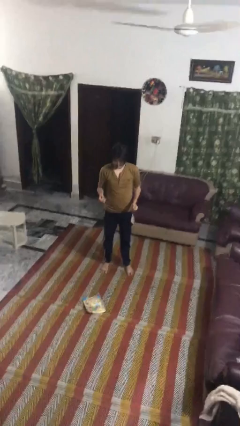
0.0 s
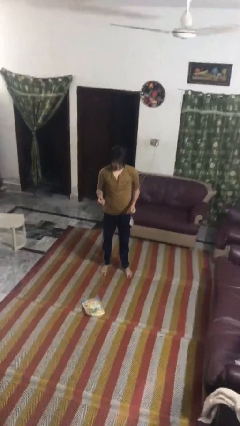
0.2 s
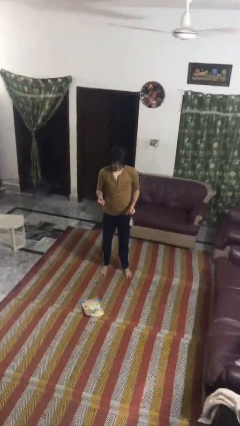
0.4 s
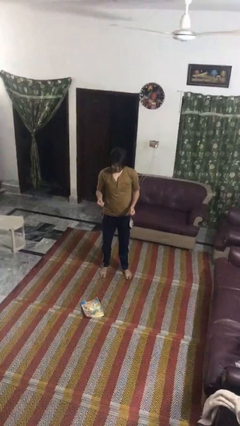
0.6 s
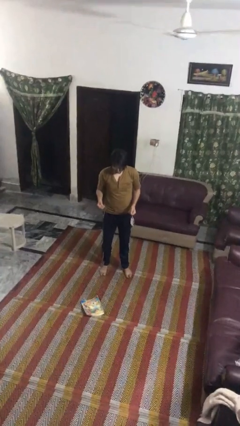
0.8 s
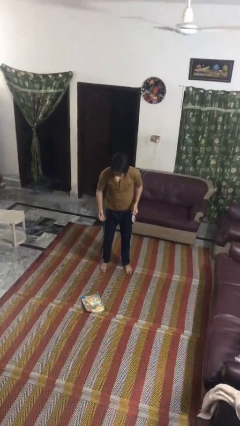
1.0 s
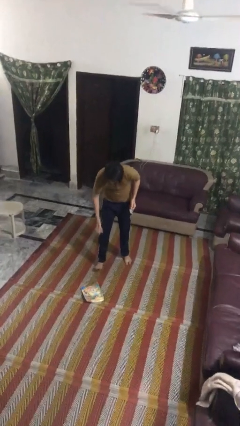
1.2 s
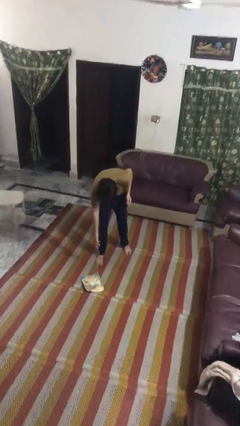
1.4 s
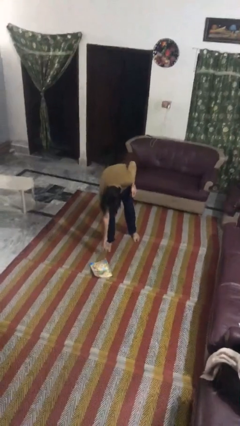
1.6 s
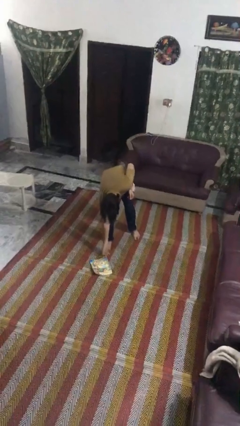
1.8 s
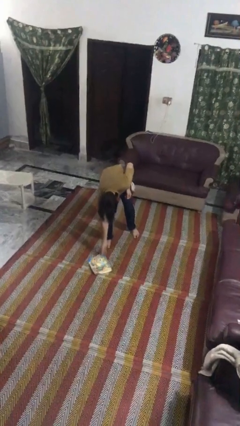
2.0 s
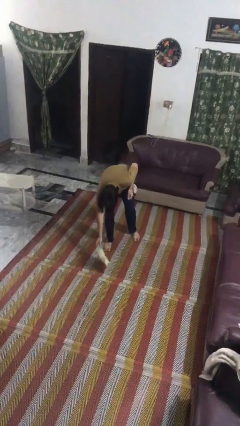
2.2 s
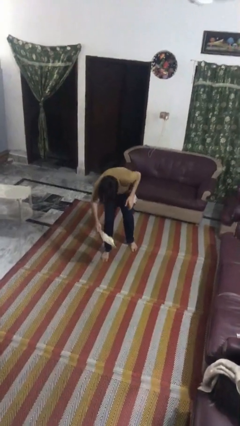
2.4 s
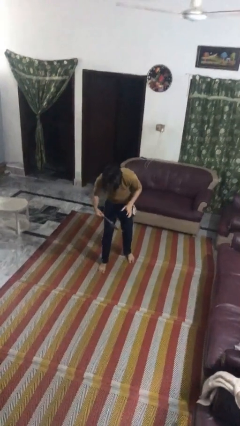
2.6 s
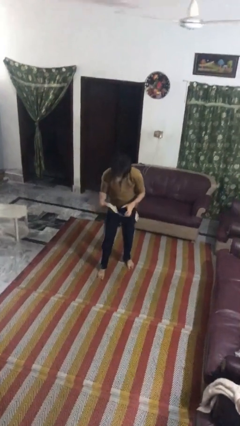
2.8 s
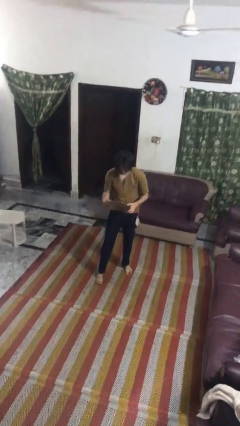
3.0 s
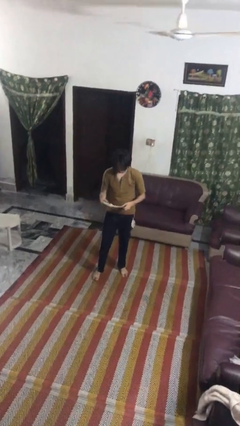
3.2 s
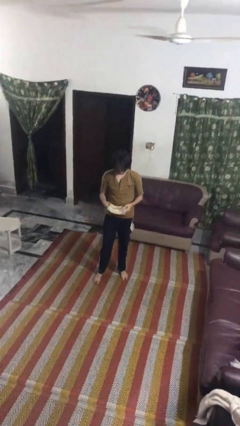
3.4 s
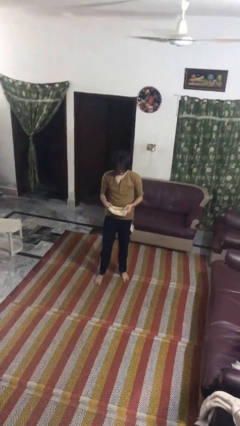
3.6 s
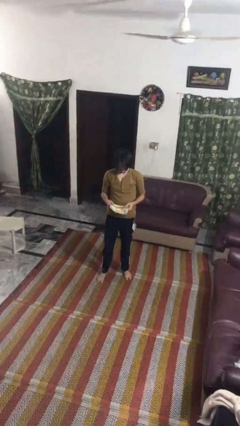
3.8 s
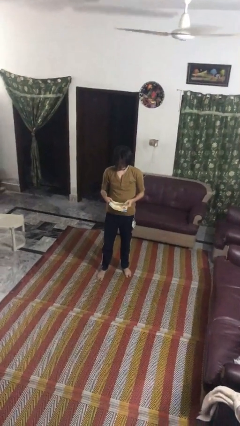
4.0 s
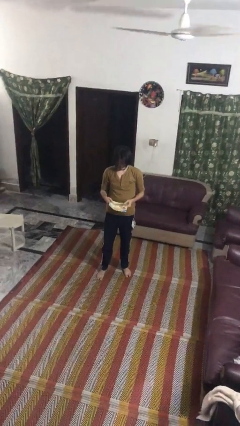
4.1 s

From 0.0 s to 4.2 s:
person picks up object from floor

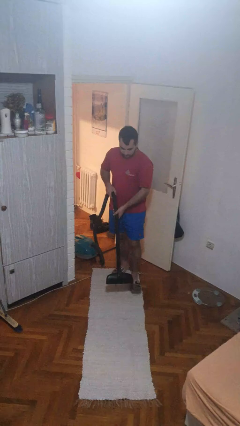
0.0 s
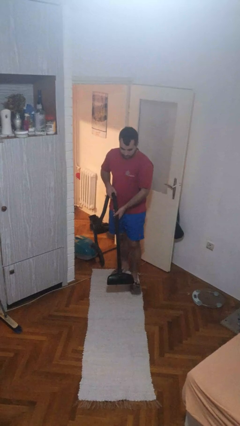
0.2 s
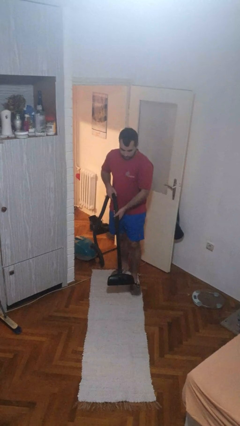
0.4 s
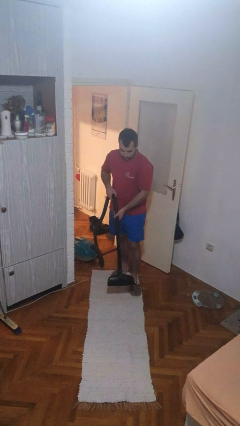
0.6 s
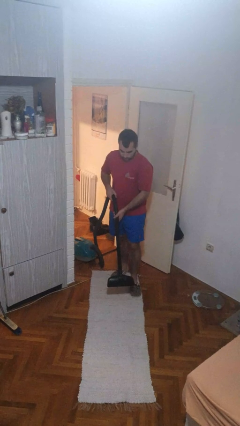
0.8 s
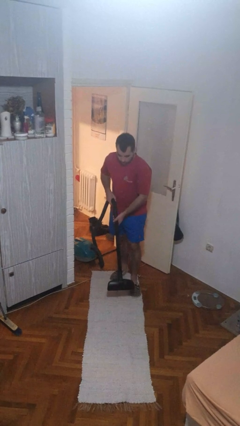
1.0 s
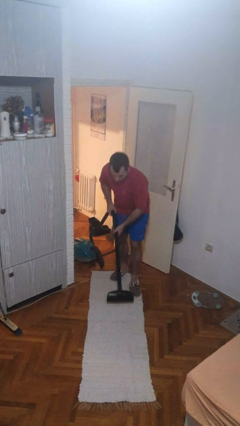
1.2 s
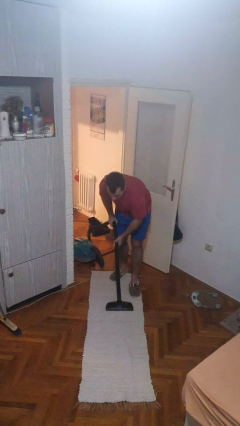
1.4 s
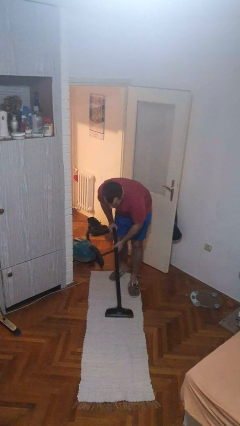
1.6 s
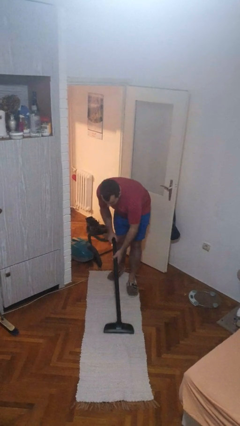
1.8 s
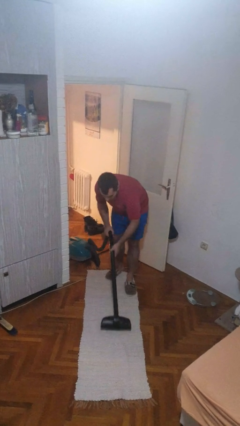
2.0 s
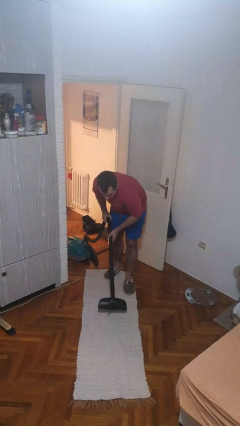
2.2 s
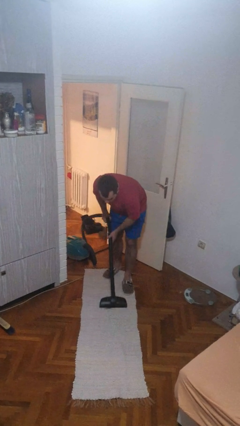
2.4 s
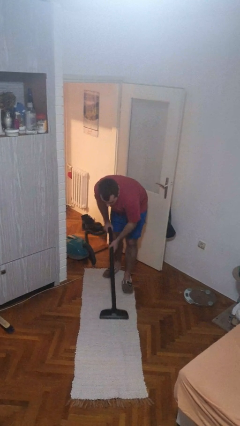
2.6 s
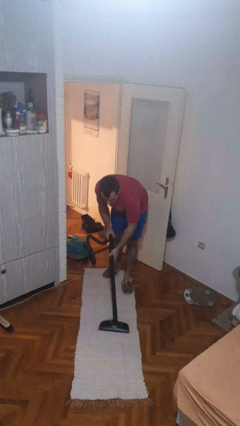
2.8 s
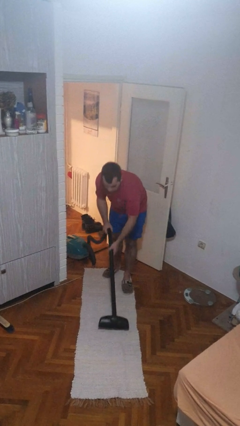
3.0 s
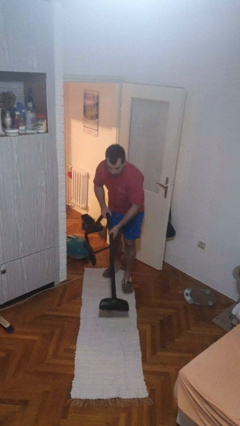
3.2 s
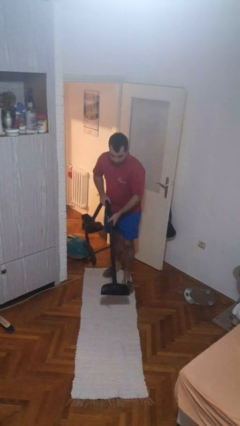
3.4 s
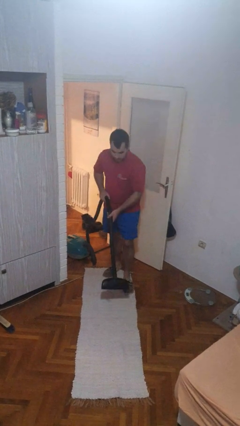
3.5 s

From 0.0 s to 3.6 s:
person vacuums carpet

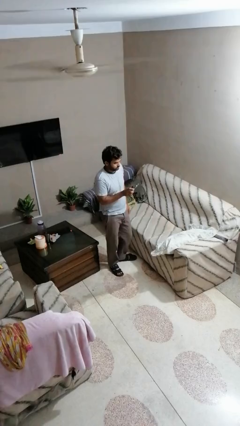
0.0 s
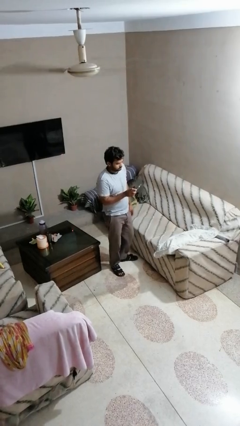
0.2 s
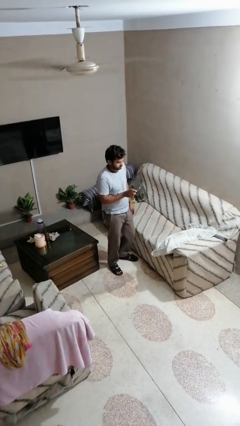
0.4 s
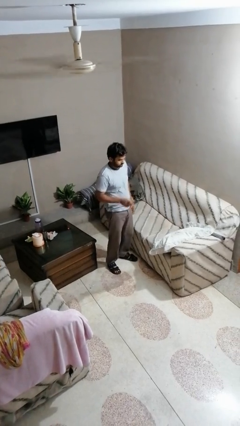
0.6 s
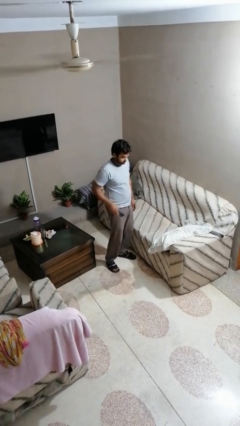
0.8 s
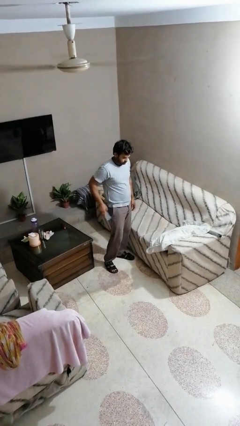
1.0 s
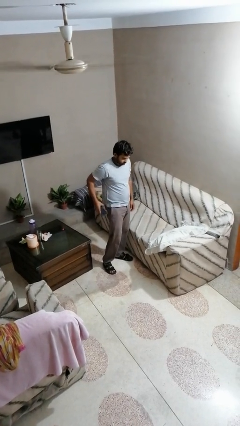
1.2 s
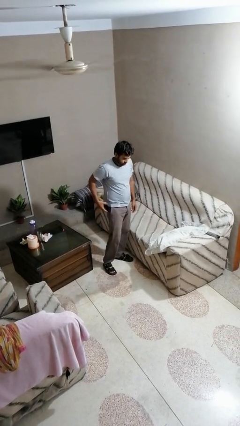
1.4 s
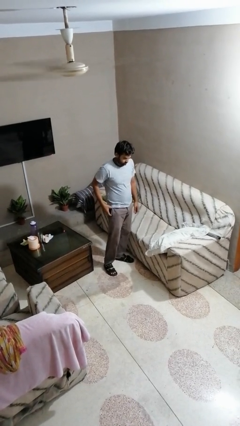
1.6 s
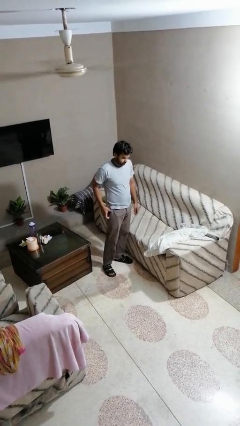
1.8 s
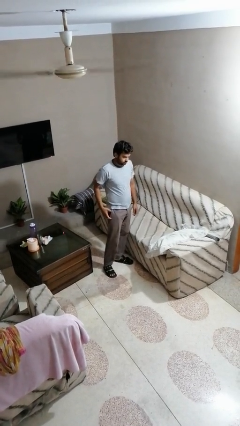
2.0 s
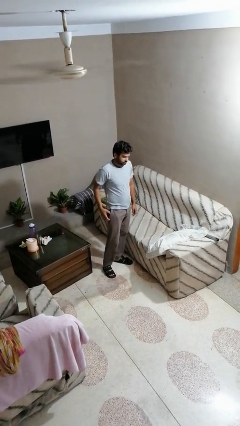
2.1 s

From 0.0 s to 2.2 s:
person puts phone into pocket

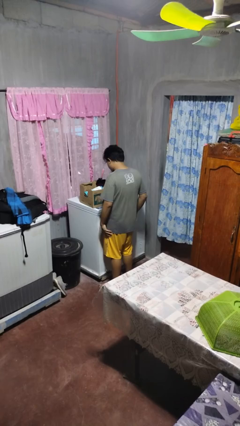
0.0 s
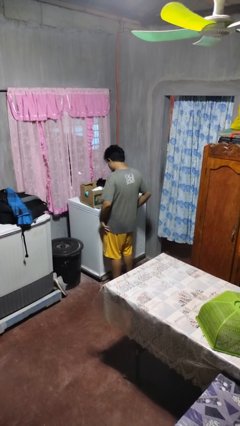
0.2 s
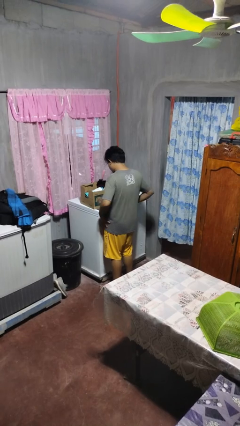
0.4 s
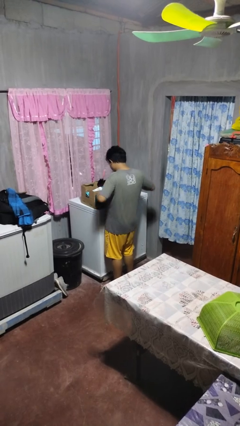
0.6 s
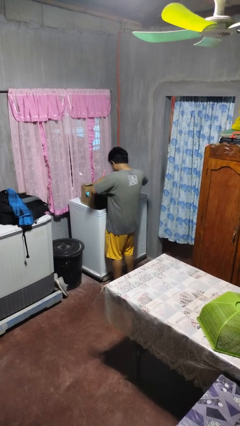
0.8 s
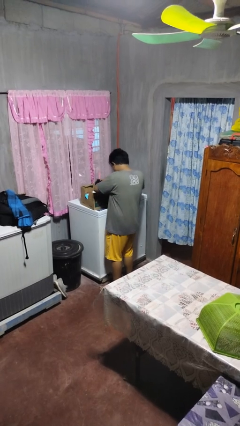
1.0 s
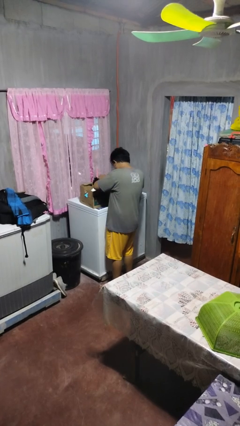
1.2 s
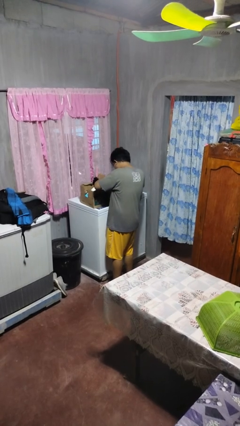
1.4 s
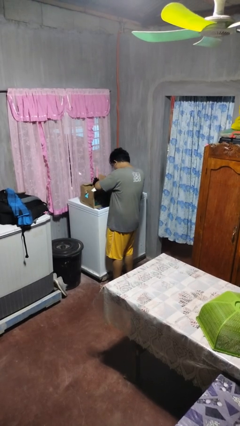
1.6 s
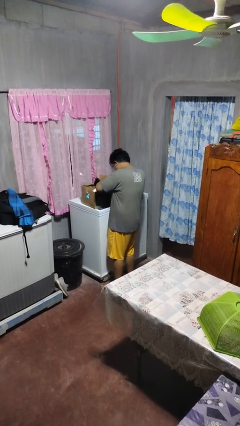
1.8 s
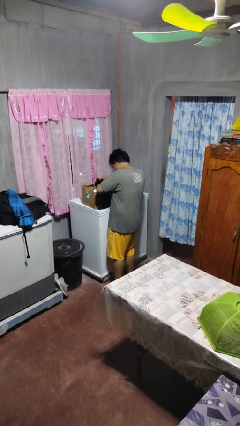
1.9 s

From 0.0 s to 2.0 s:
person searches in box

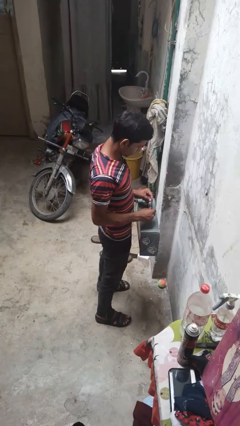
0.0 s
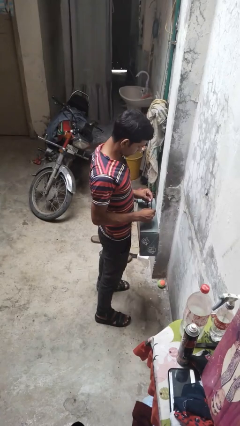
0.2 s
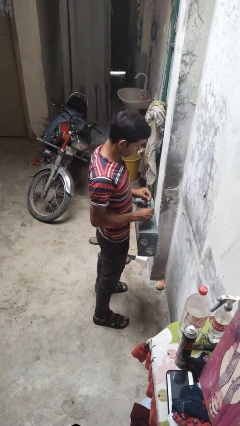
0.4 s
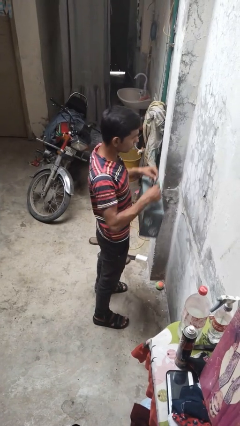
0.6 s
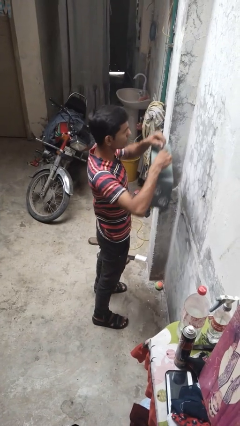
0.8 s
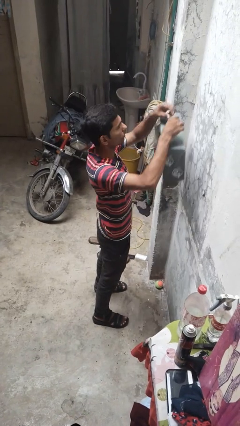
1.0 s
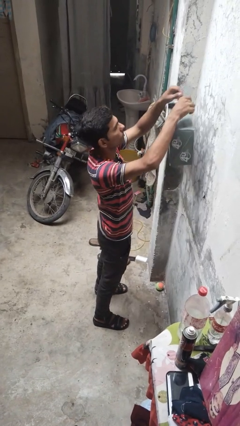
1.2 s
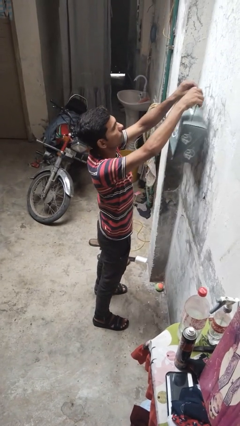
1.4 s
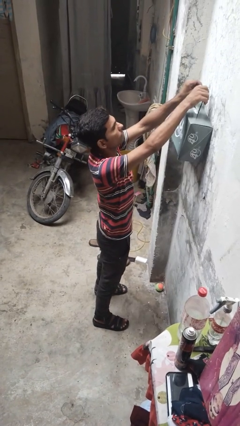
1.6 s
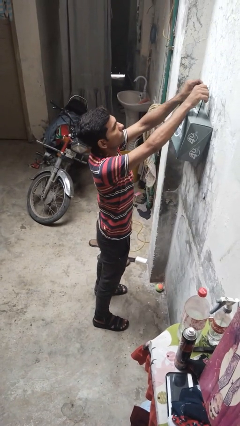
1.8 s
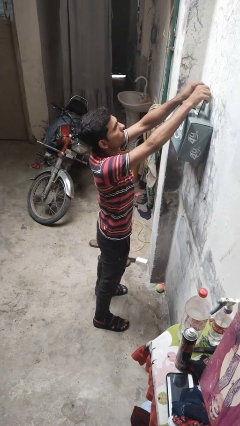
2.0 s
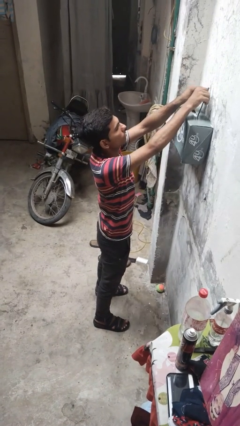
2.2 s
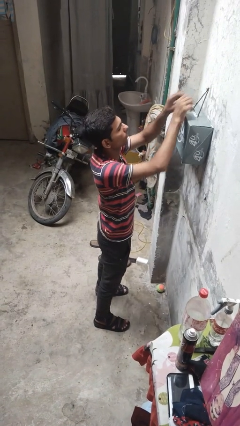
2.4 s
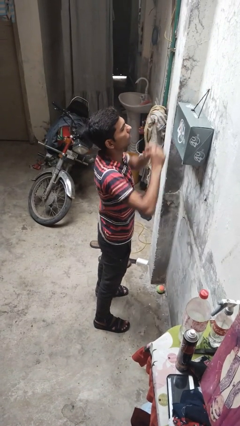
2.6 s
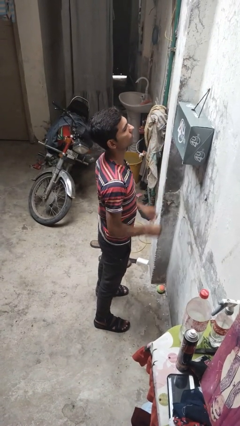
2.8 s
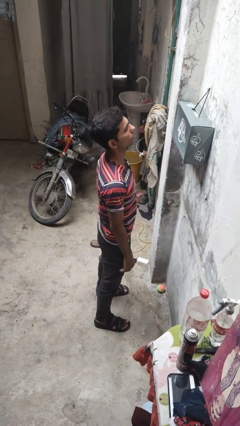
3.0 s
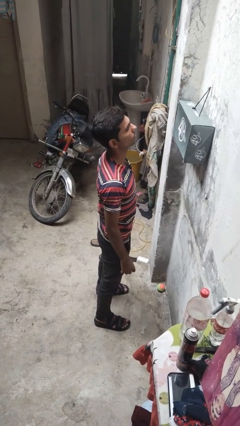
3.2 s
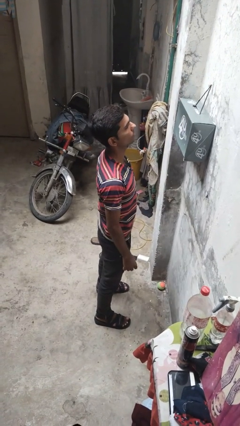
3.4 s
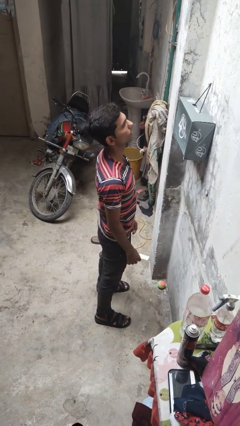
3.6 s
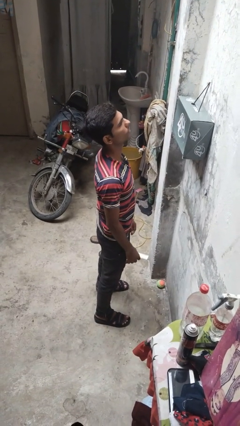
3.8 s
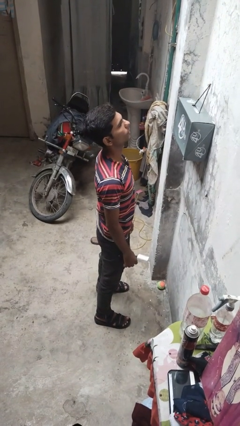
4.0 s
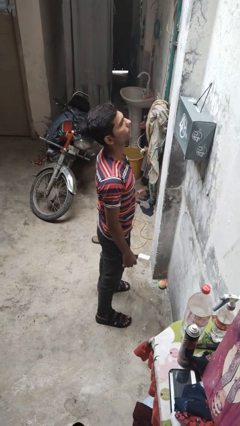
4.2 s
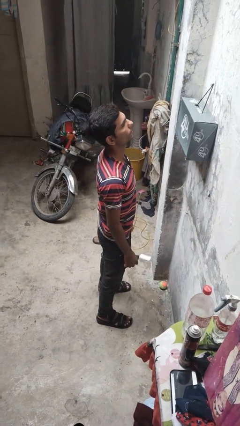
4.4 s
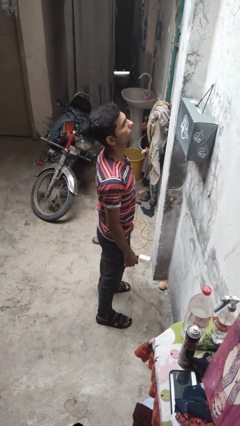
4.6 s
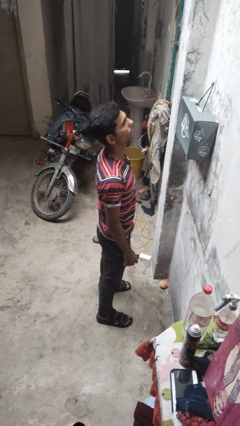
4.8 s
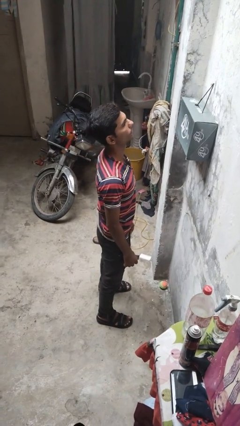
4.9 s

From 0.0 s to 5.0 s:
person puts up smoke detector

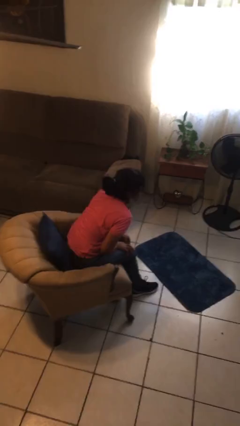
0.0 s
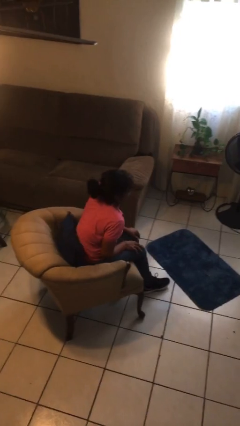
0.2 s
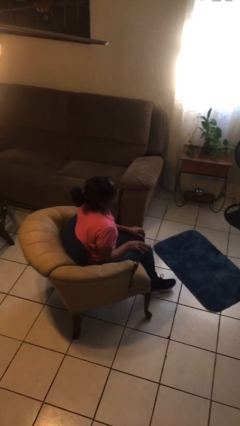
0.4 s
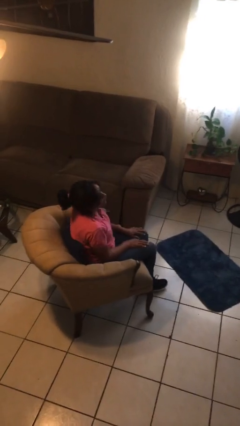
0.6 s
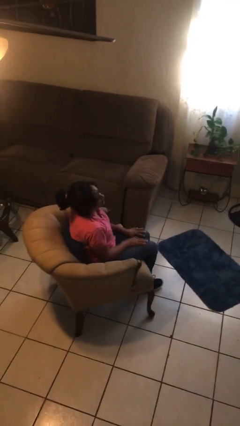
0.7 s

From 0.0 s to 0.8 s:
person sits down
